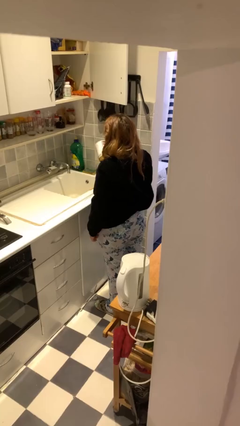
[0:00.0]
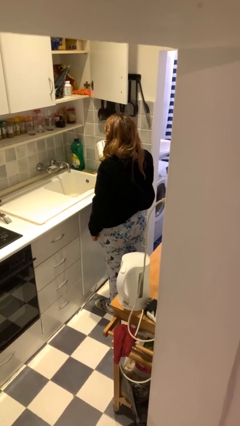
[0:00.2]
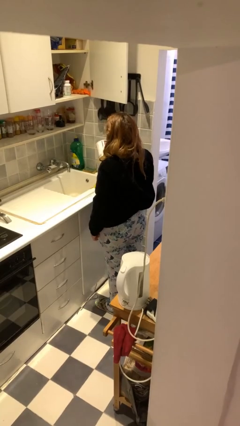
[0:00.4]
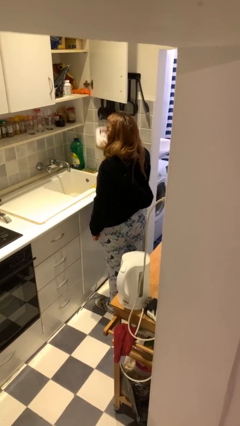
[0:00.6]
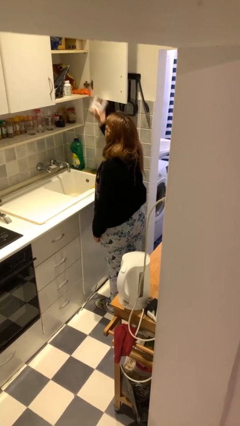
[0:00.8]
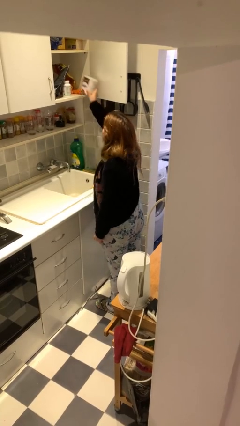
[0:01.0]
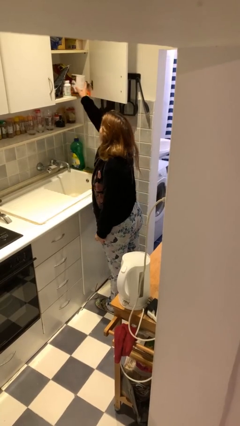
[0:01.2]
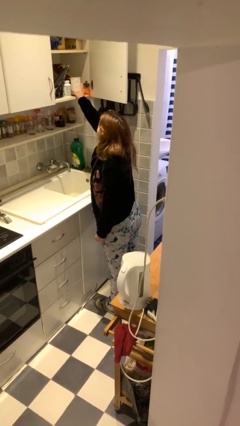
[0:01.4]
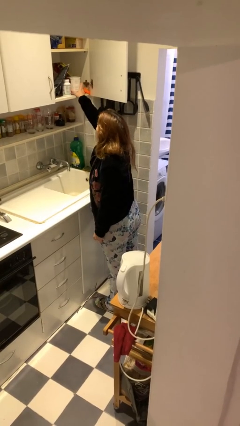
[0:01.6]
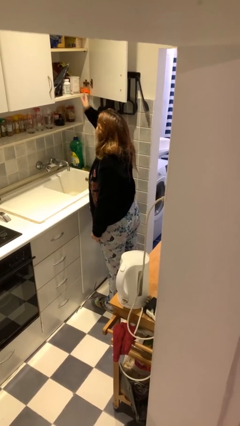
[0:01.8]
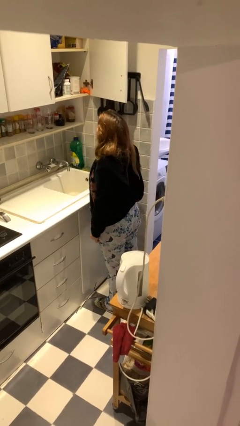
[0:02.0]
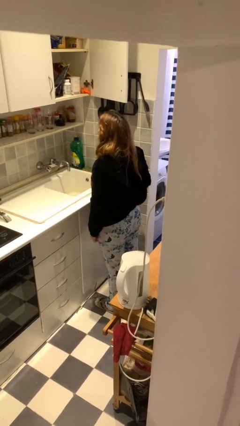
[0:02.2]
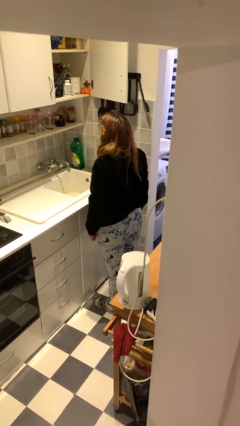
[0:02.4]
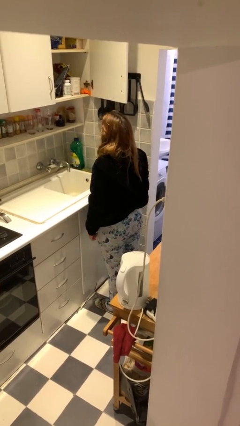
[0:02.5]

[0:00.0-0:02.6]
person puts object in cabinet

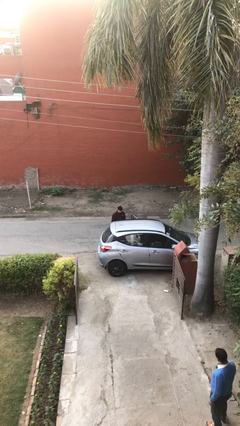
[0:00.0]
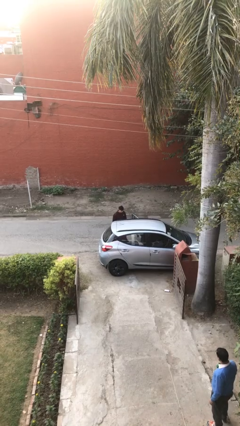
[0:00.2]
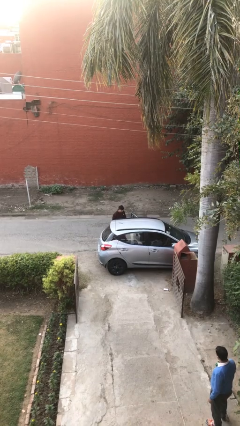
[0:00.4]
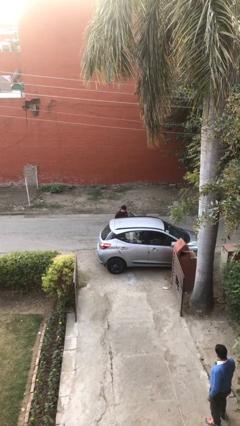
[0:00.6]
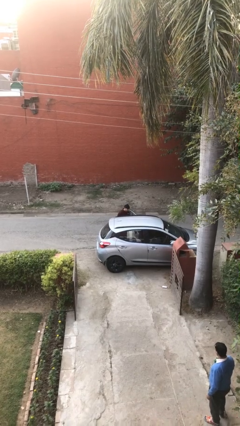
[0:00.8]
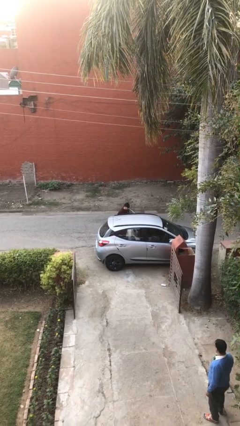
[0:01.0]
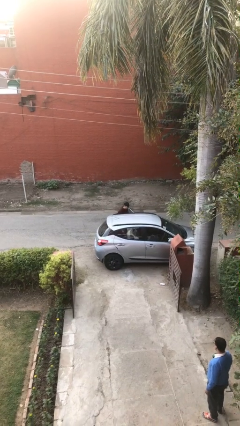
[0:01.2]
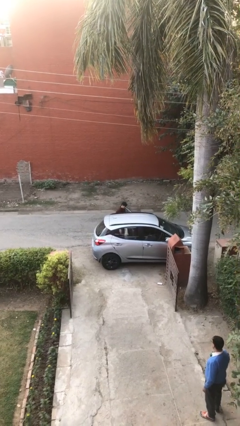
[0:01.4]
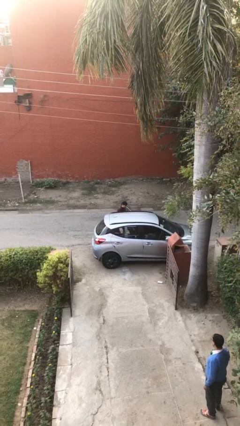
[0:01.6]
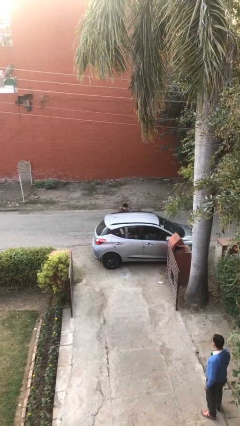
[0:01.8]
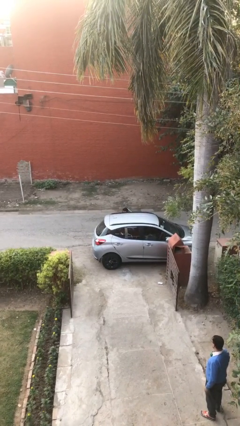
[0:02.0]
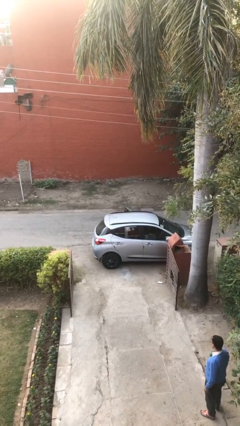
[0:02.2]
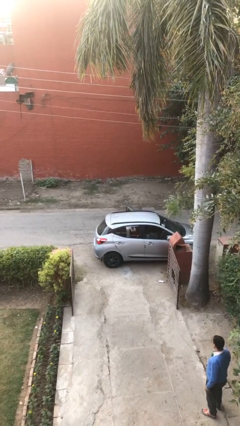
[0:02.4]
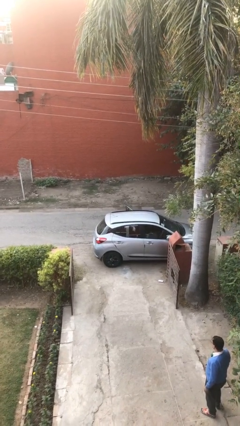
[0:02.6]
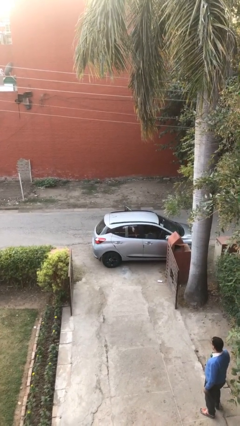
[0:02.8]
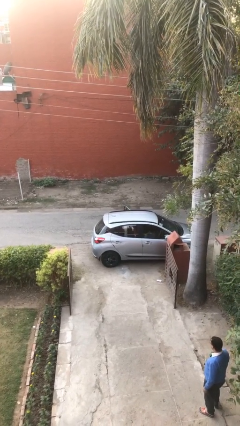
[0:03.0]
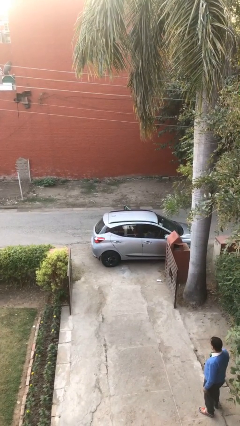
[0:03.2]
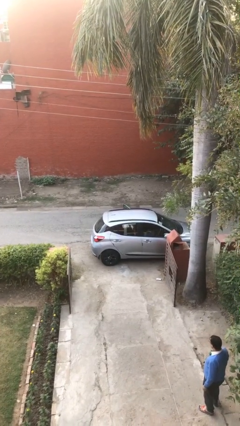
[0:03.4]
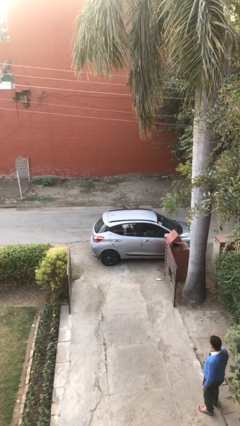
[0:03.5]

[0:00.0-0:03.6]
person enters car

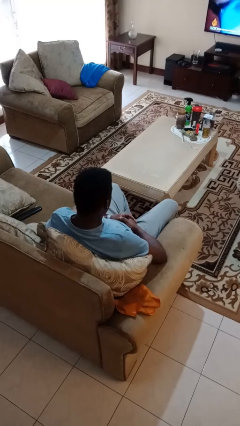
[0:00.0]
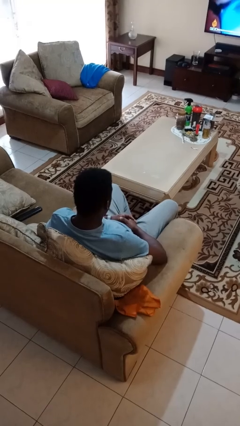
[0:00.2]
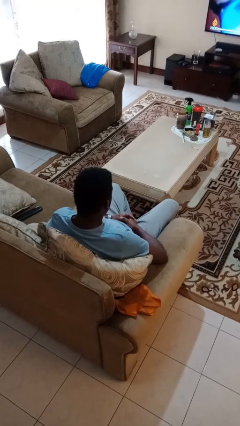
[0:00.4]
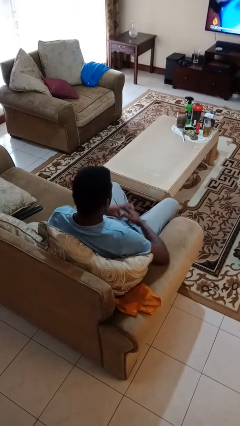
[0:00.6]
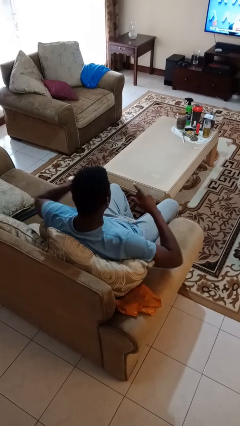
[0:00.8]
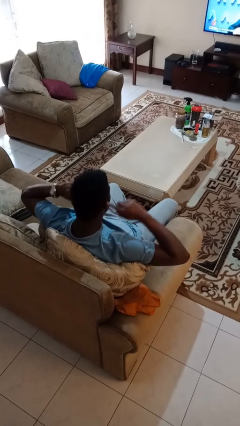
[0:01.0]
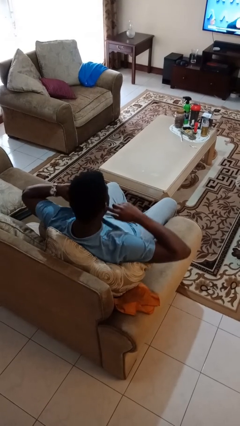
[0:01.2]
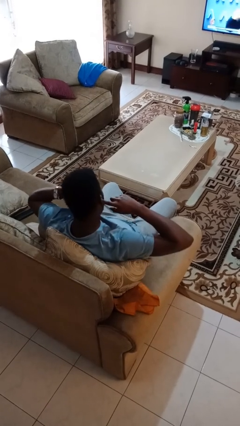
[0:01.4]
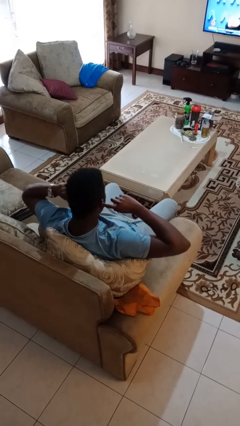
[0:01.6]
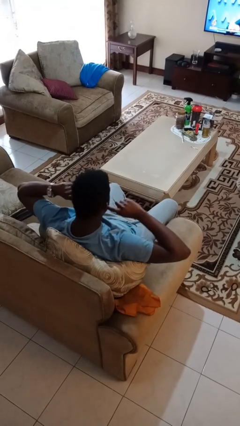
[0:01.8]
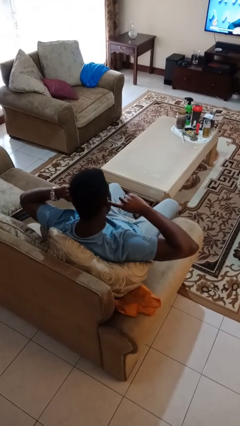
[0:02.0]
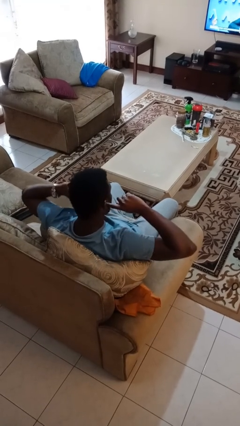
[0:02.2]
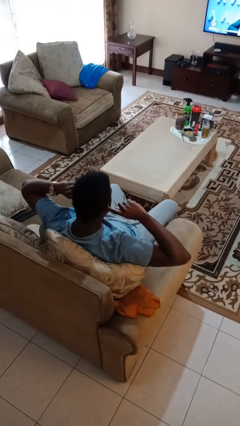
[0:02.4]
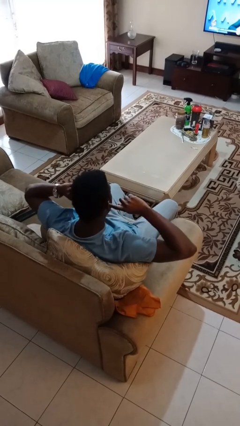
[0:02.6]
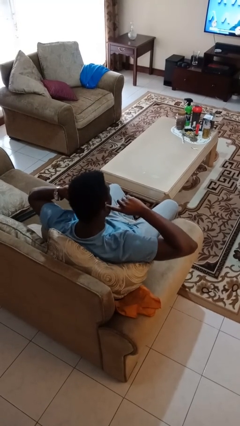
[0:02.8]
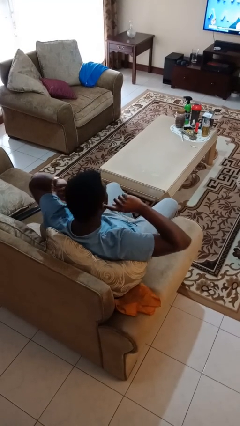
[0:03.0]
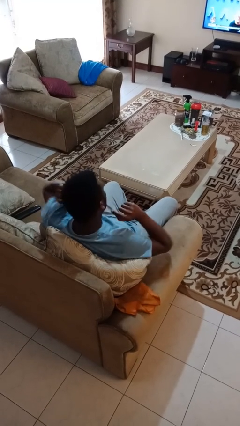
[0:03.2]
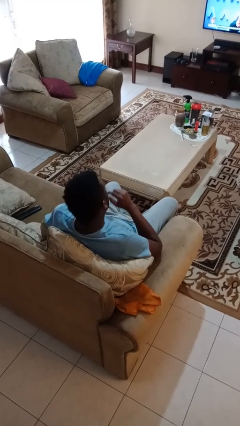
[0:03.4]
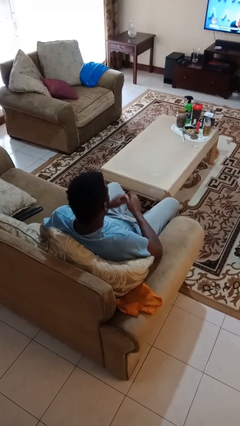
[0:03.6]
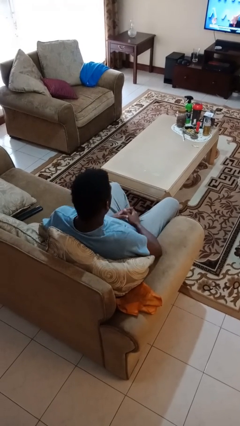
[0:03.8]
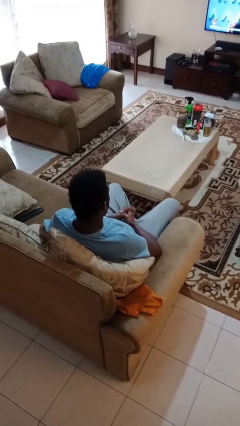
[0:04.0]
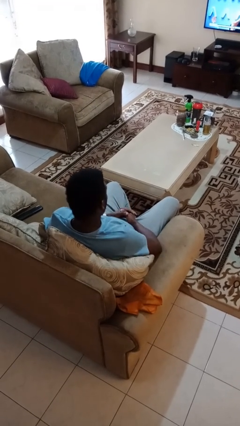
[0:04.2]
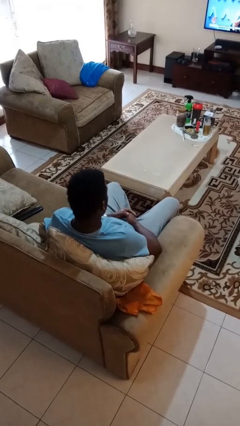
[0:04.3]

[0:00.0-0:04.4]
person puts fingers in ear

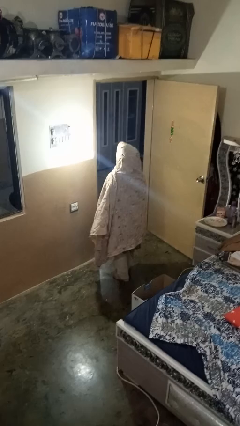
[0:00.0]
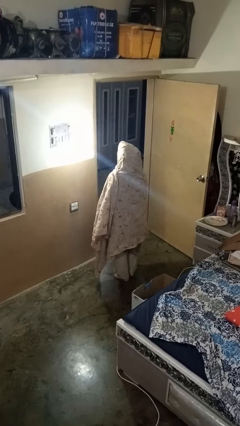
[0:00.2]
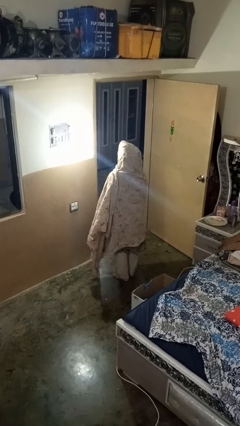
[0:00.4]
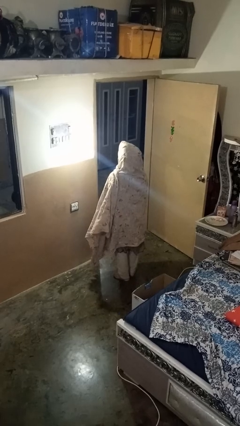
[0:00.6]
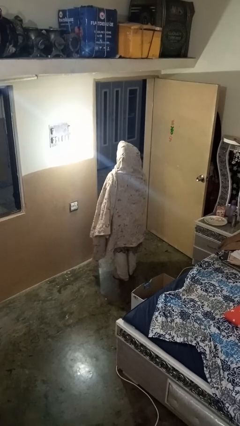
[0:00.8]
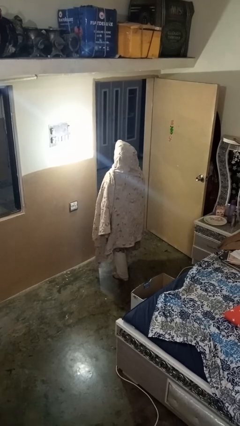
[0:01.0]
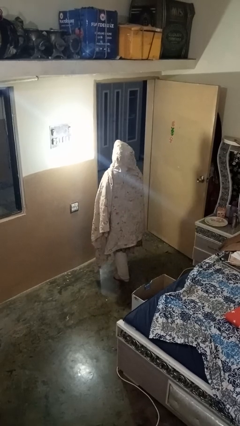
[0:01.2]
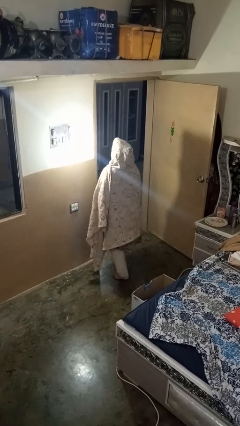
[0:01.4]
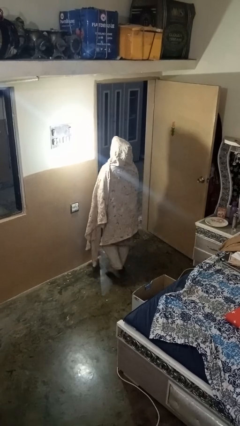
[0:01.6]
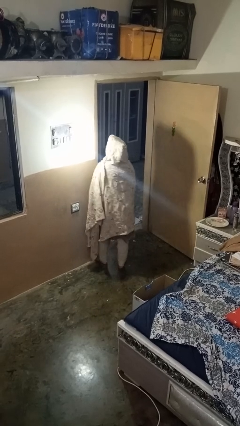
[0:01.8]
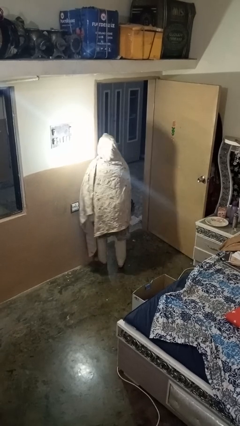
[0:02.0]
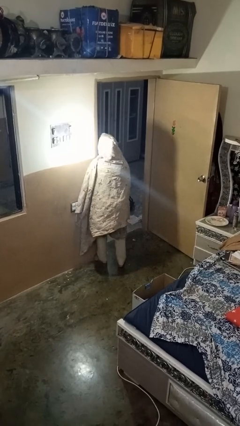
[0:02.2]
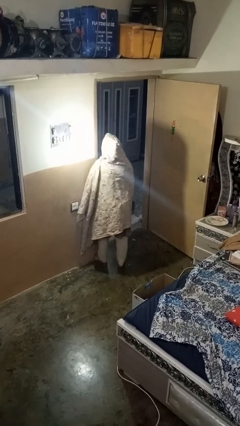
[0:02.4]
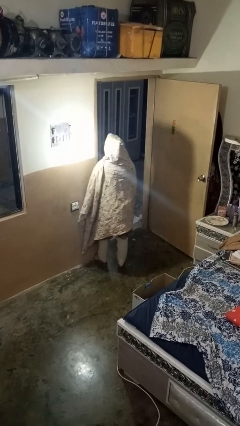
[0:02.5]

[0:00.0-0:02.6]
person bumps into wall

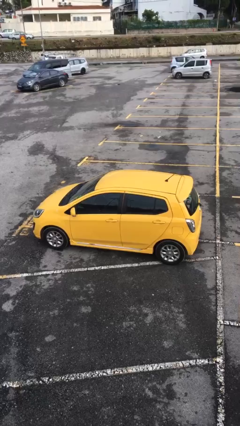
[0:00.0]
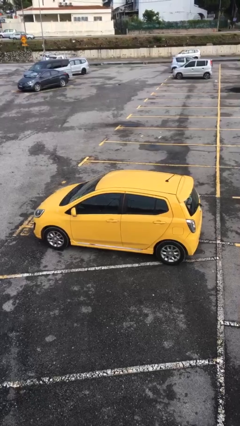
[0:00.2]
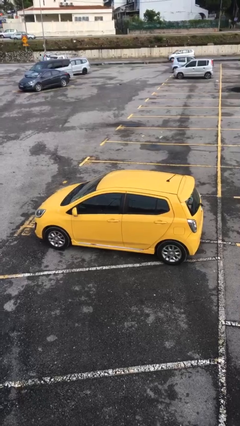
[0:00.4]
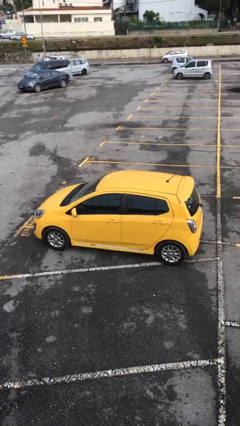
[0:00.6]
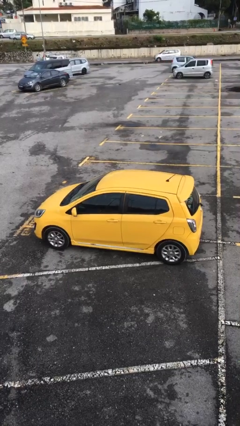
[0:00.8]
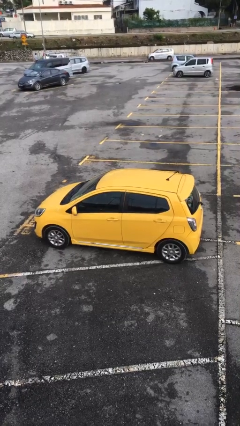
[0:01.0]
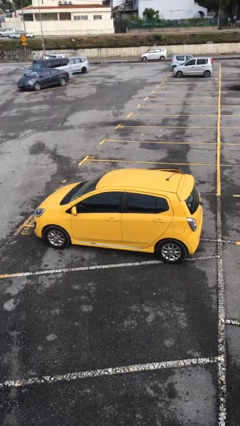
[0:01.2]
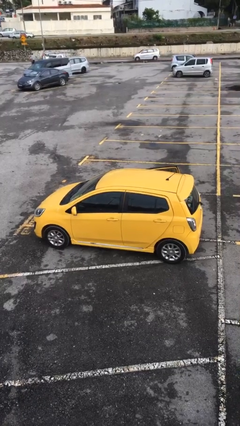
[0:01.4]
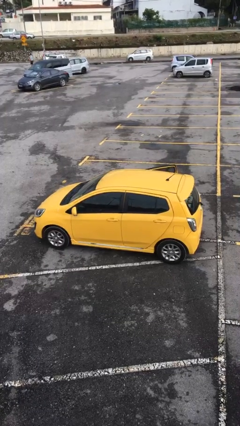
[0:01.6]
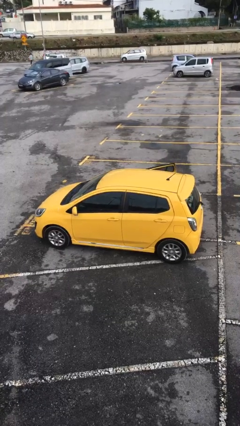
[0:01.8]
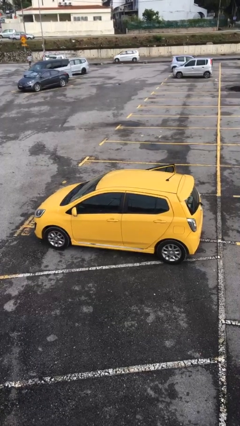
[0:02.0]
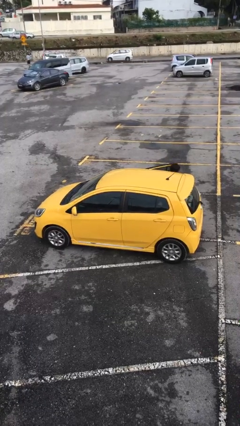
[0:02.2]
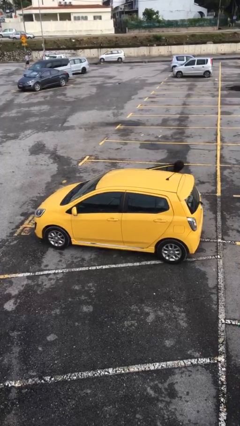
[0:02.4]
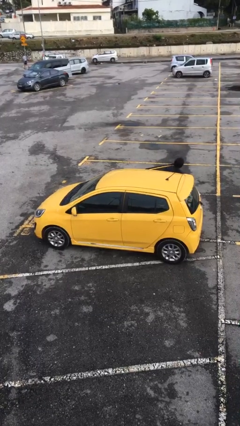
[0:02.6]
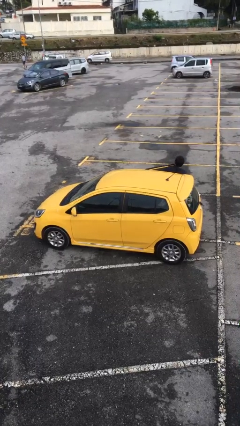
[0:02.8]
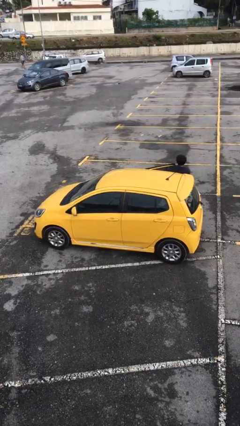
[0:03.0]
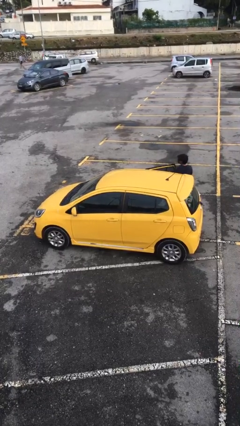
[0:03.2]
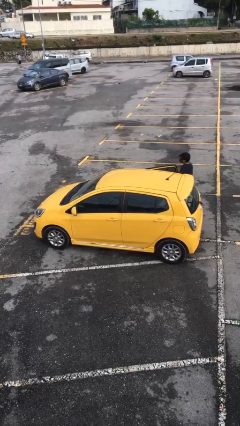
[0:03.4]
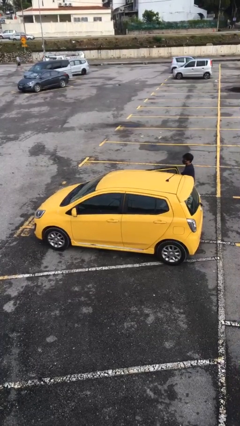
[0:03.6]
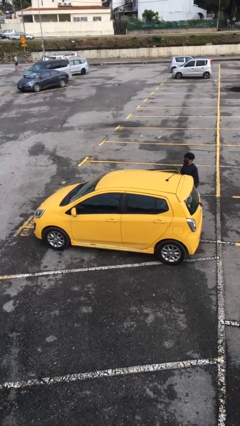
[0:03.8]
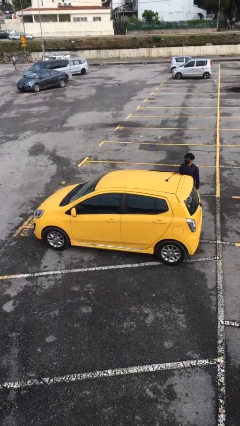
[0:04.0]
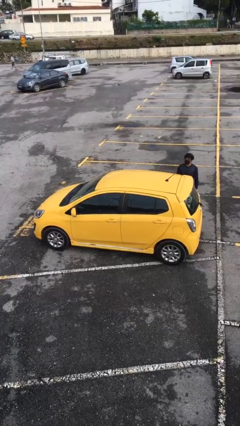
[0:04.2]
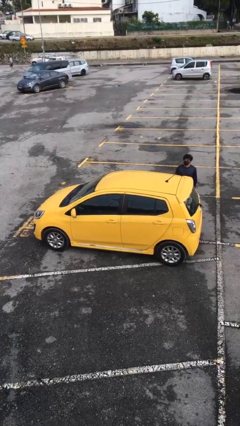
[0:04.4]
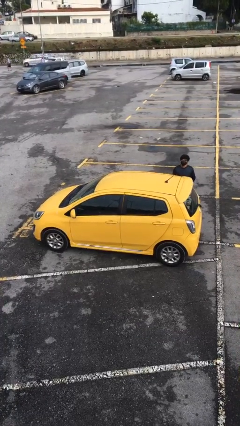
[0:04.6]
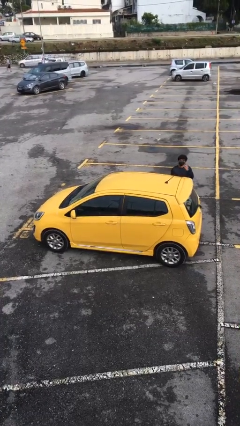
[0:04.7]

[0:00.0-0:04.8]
car drops off person
